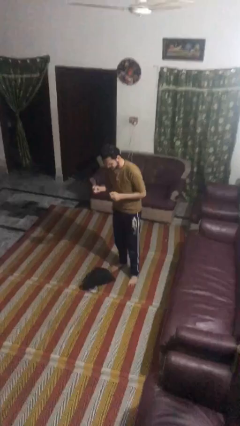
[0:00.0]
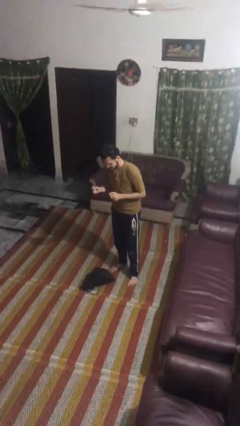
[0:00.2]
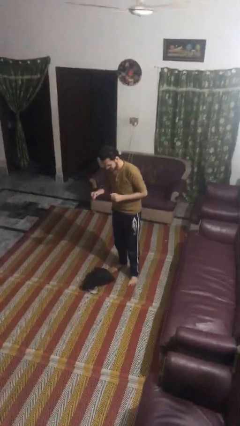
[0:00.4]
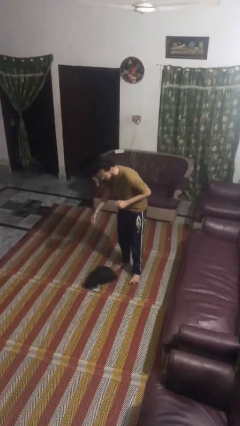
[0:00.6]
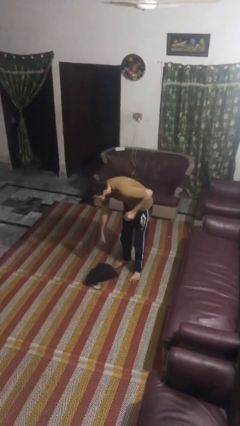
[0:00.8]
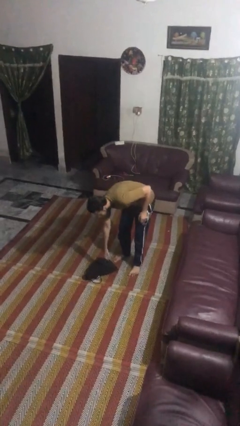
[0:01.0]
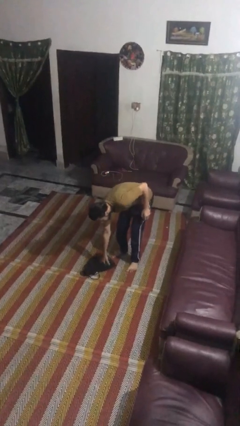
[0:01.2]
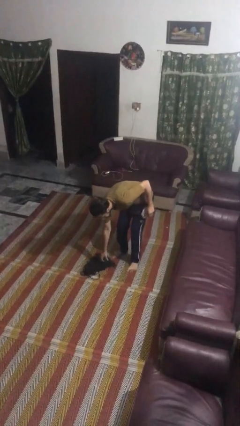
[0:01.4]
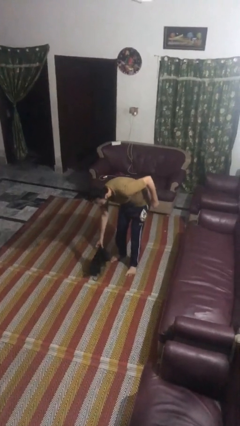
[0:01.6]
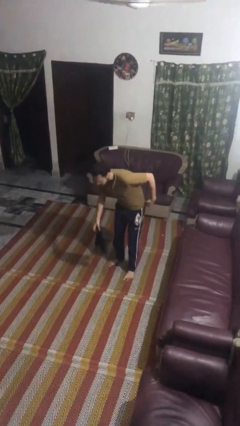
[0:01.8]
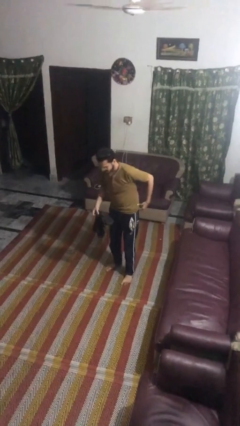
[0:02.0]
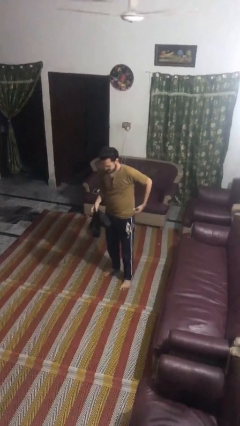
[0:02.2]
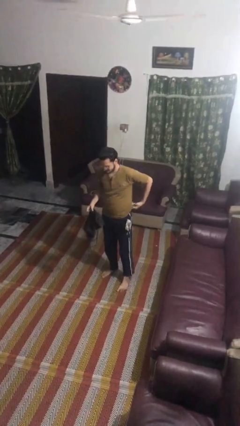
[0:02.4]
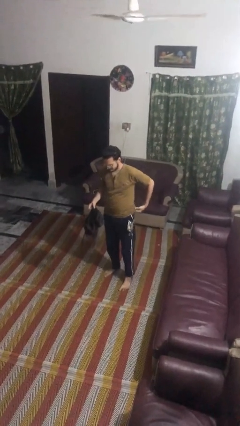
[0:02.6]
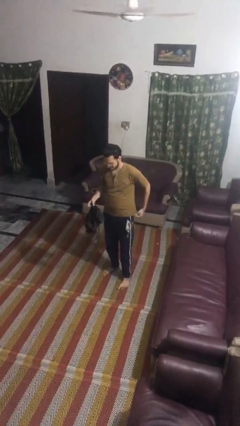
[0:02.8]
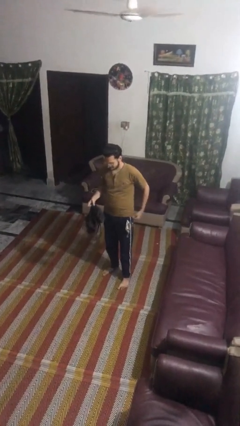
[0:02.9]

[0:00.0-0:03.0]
person picks up object from floor

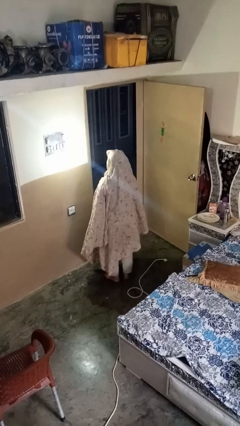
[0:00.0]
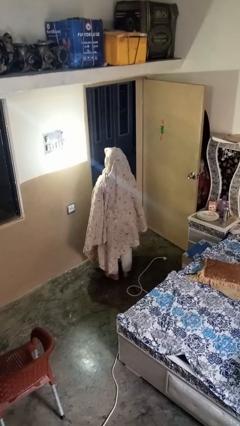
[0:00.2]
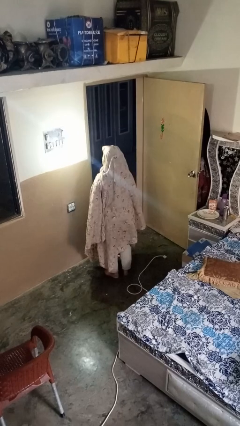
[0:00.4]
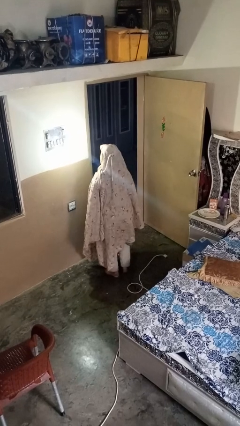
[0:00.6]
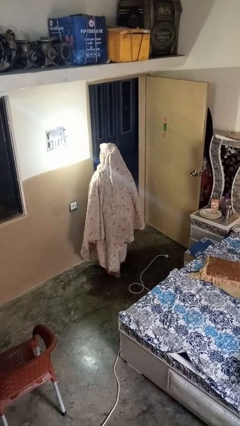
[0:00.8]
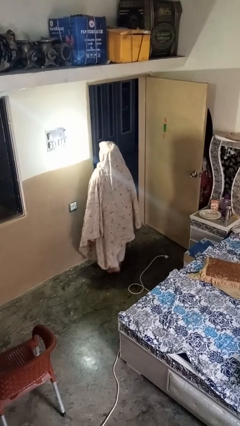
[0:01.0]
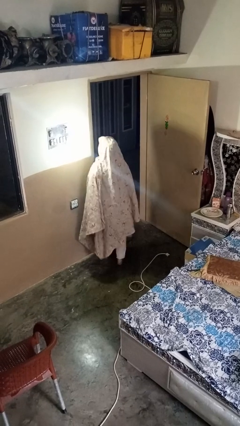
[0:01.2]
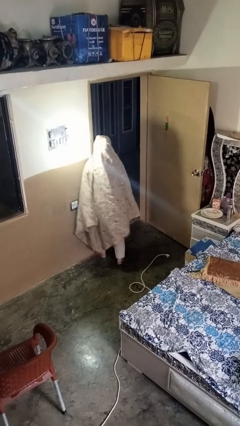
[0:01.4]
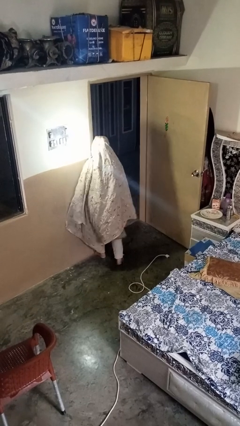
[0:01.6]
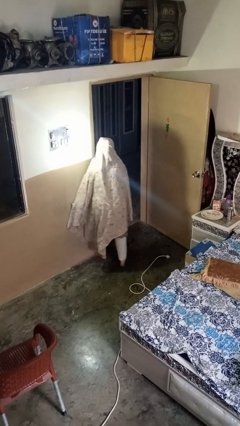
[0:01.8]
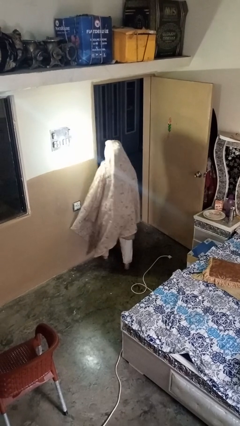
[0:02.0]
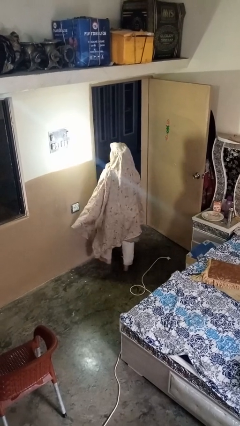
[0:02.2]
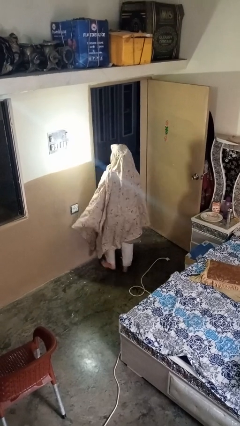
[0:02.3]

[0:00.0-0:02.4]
person bumps into wall

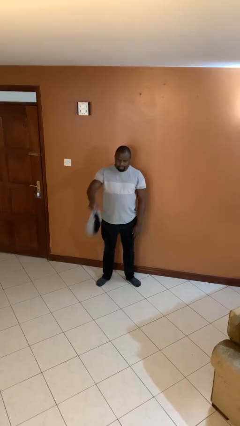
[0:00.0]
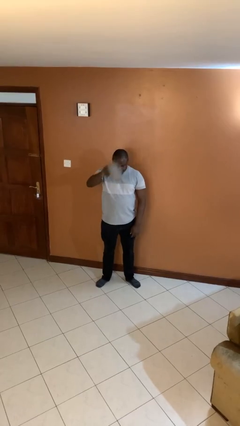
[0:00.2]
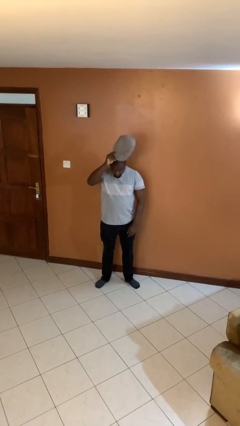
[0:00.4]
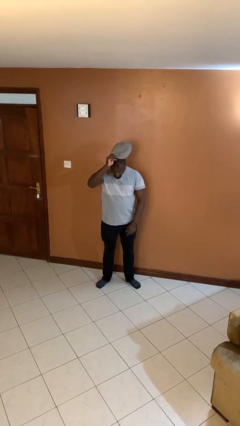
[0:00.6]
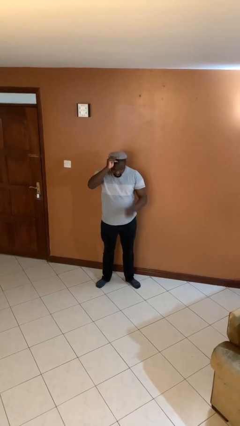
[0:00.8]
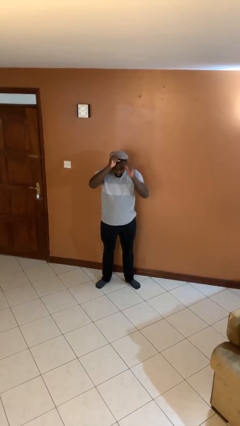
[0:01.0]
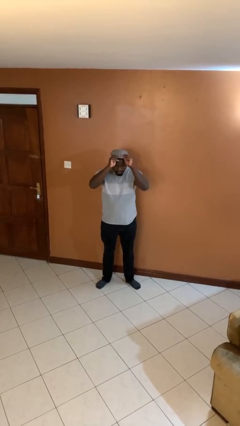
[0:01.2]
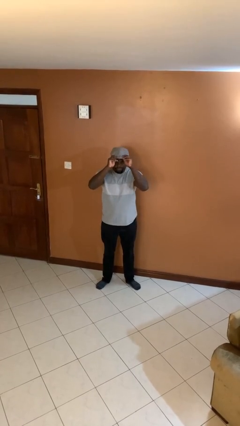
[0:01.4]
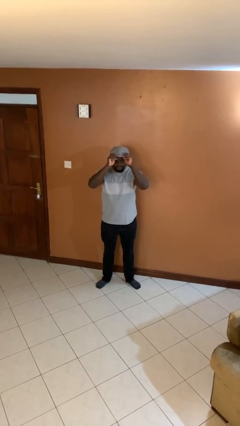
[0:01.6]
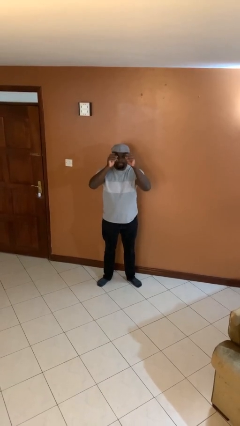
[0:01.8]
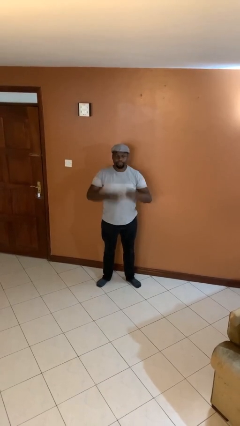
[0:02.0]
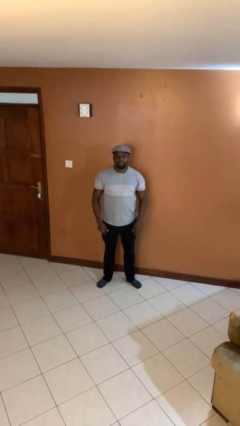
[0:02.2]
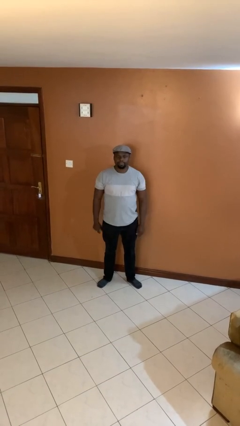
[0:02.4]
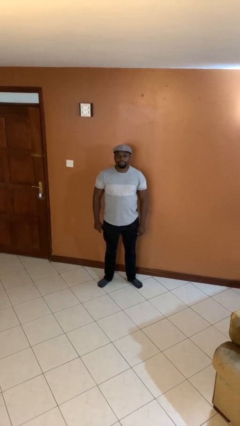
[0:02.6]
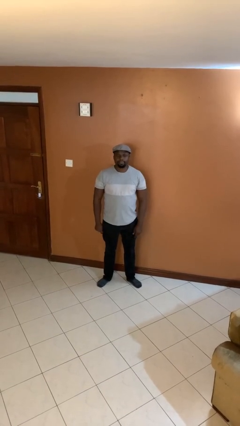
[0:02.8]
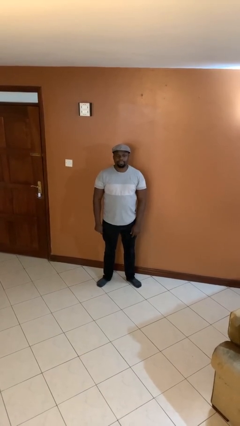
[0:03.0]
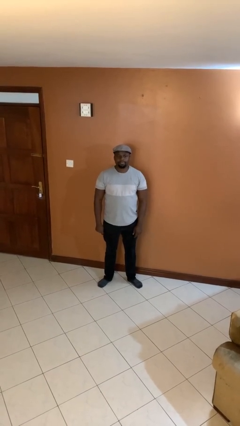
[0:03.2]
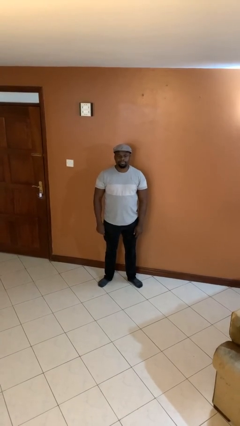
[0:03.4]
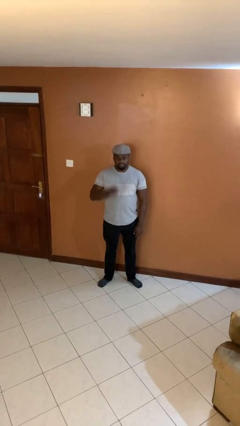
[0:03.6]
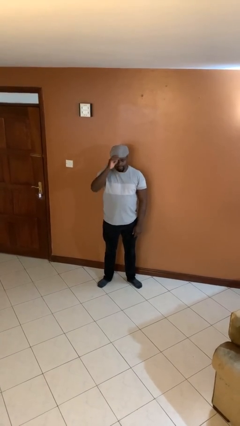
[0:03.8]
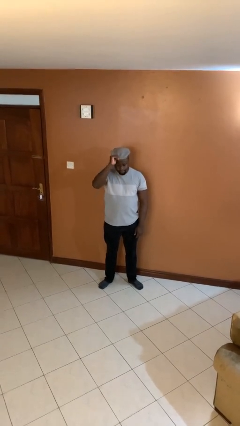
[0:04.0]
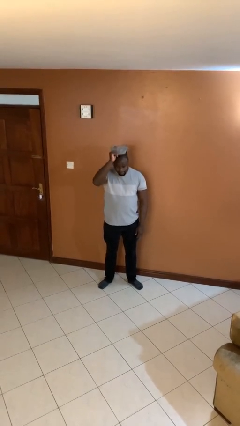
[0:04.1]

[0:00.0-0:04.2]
person puts on hat

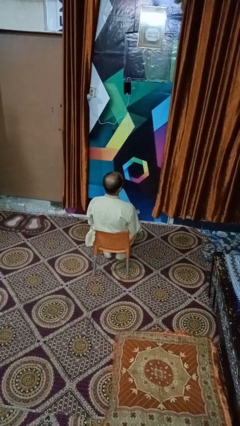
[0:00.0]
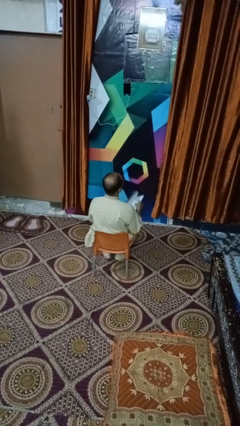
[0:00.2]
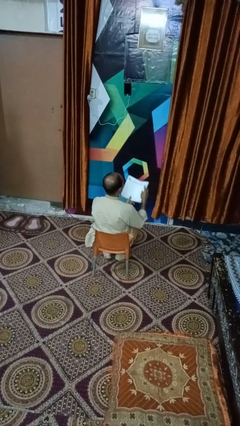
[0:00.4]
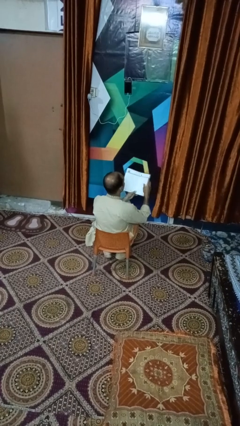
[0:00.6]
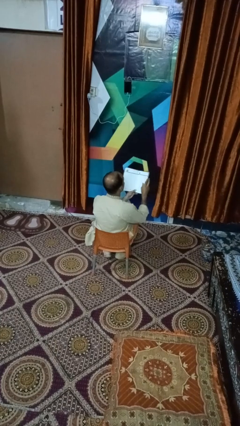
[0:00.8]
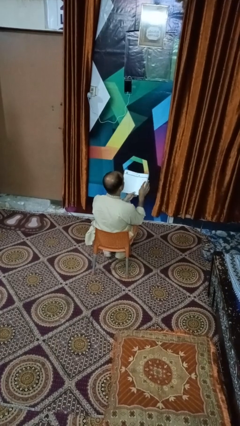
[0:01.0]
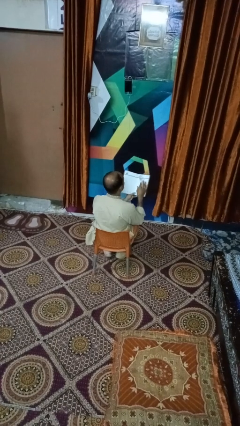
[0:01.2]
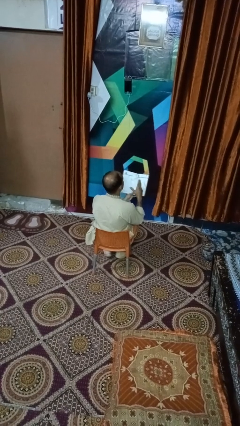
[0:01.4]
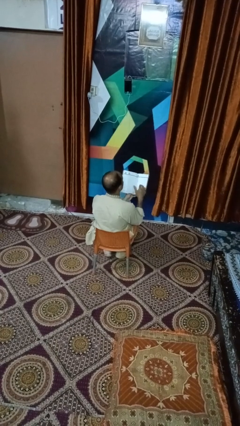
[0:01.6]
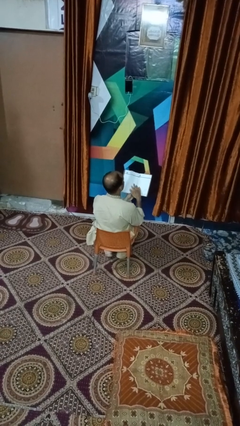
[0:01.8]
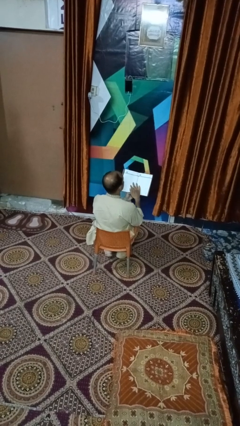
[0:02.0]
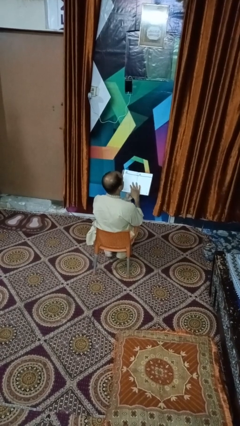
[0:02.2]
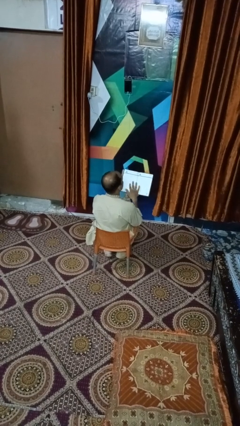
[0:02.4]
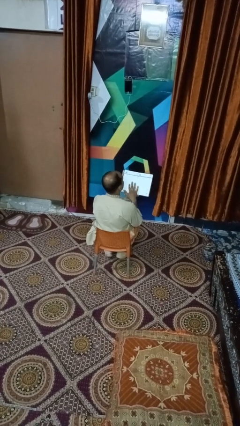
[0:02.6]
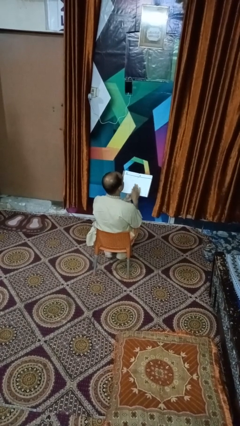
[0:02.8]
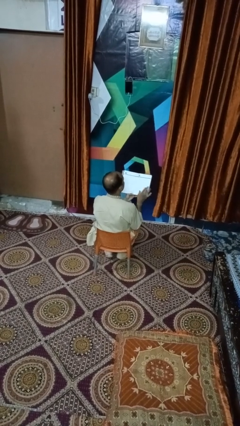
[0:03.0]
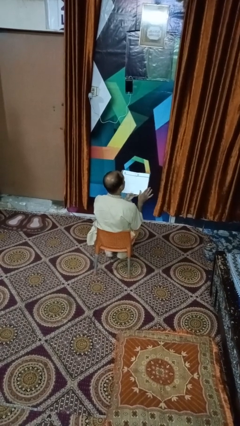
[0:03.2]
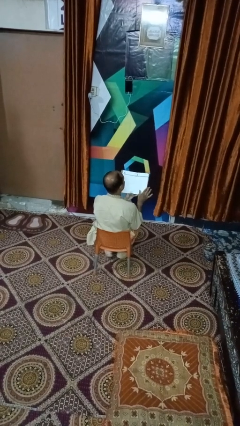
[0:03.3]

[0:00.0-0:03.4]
person reads magazine

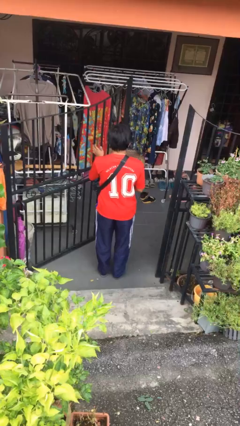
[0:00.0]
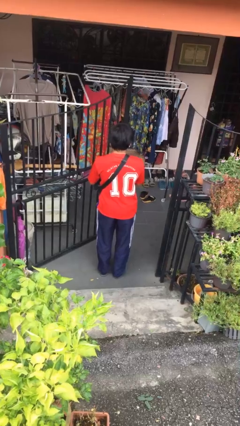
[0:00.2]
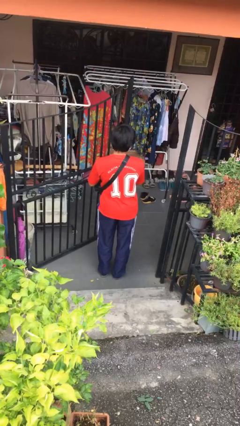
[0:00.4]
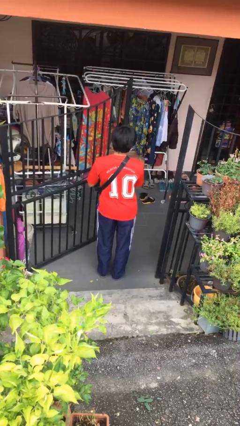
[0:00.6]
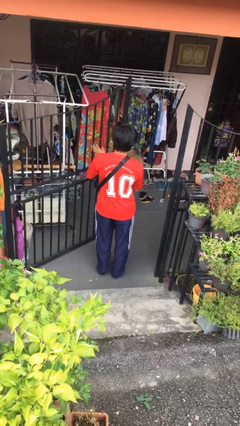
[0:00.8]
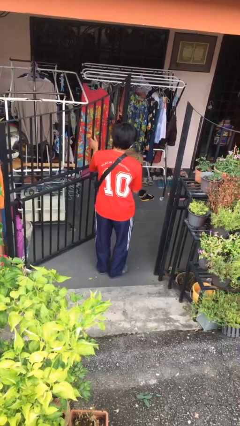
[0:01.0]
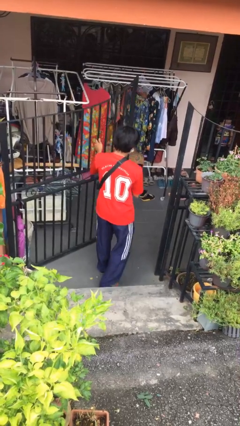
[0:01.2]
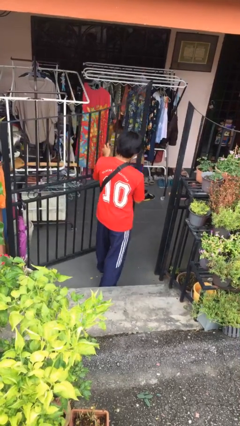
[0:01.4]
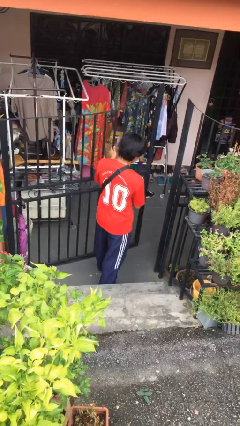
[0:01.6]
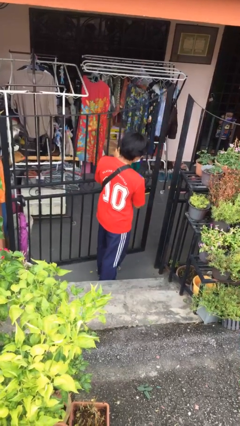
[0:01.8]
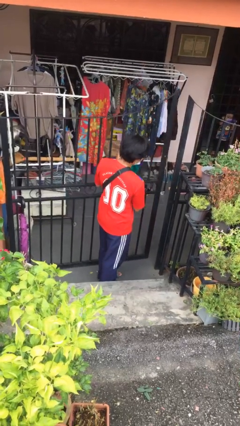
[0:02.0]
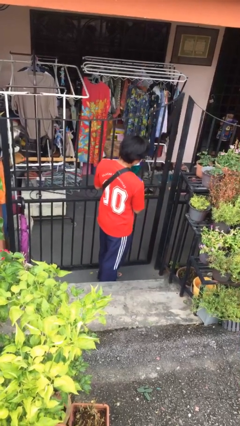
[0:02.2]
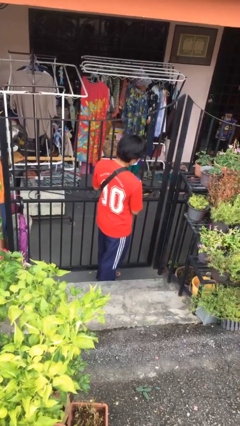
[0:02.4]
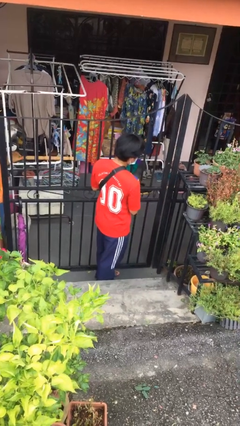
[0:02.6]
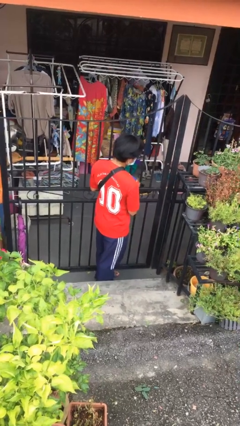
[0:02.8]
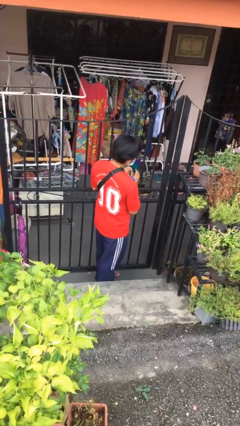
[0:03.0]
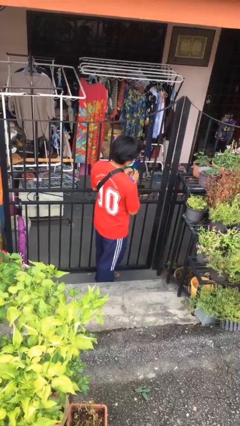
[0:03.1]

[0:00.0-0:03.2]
person closes facility door

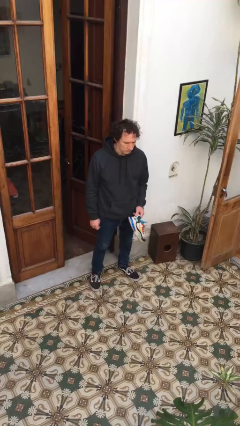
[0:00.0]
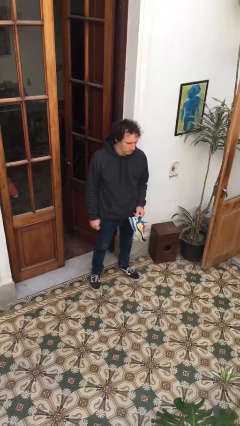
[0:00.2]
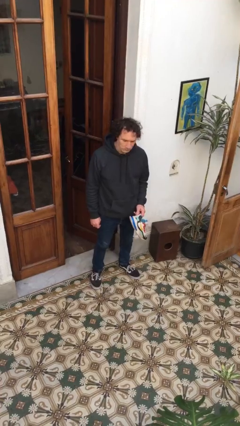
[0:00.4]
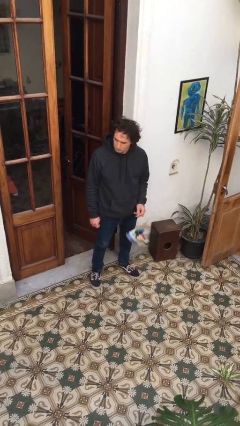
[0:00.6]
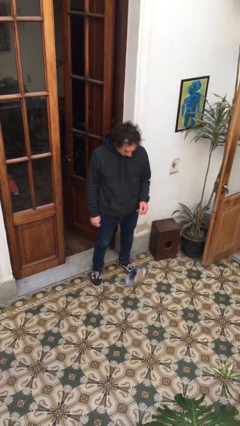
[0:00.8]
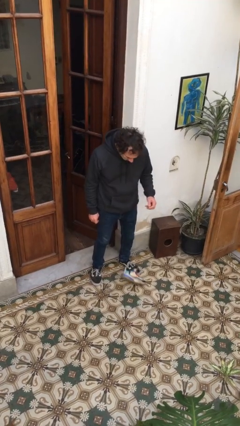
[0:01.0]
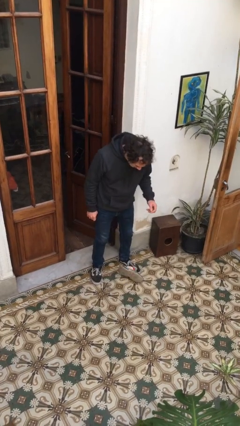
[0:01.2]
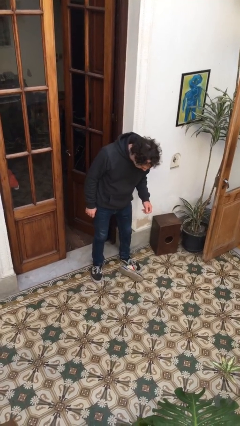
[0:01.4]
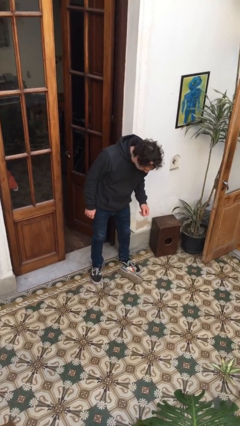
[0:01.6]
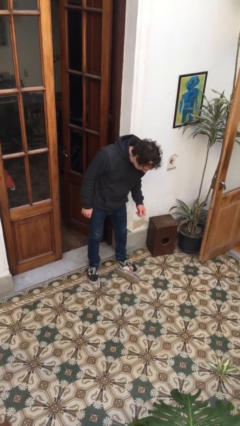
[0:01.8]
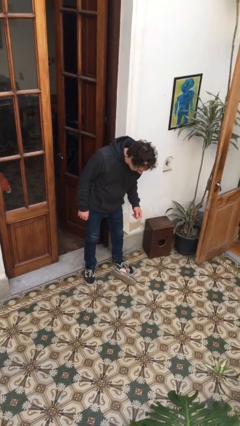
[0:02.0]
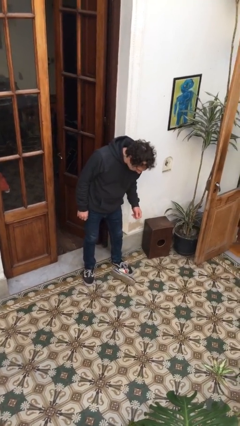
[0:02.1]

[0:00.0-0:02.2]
person drops object
